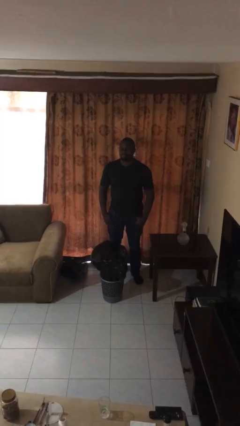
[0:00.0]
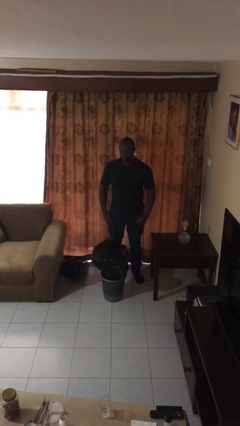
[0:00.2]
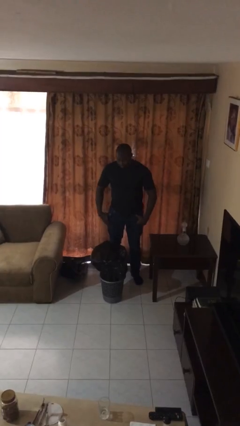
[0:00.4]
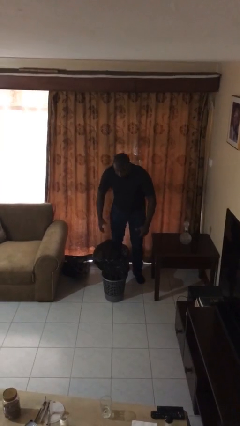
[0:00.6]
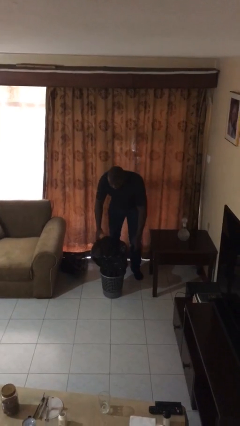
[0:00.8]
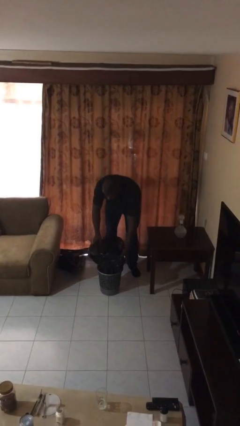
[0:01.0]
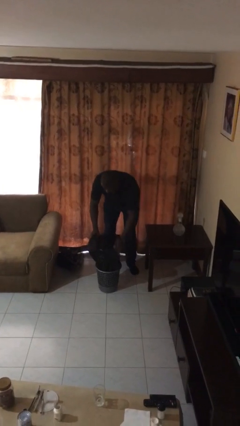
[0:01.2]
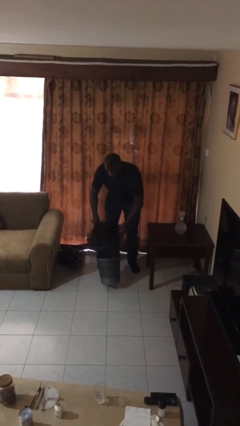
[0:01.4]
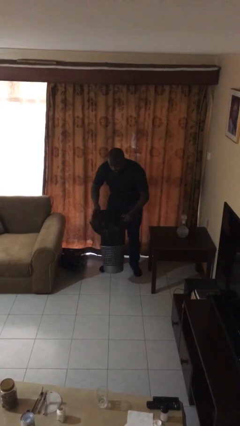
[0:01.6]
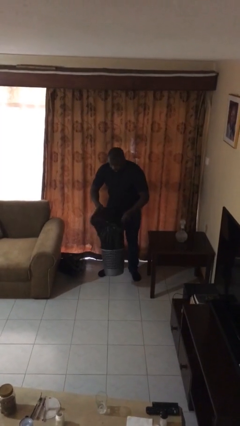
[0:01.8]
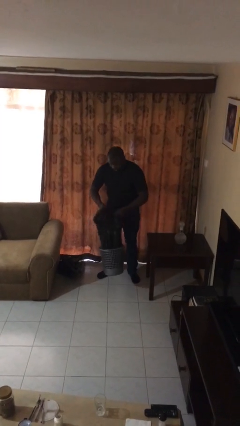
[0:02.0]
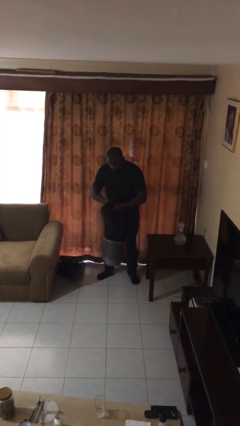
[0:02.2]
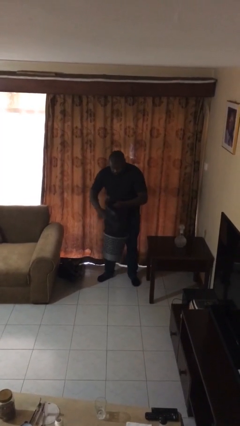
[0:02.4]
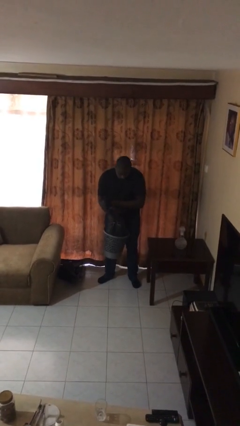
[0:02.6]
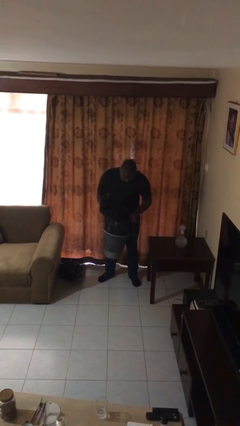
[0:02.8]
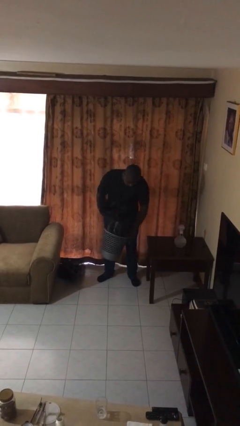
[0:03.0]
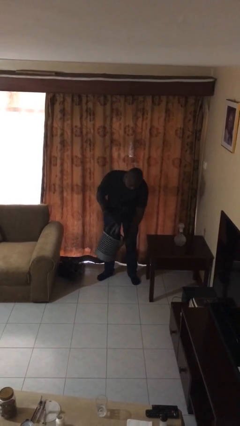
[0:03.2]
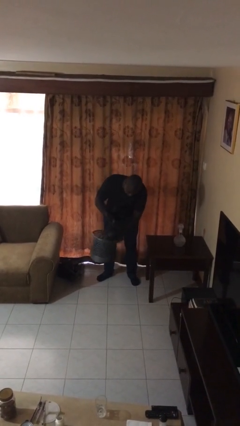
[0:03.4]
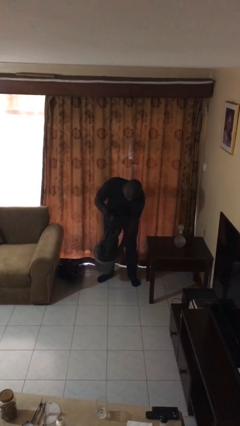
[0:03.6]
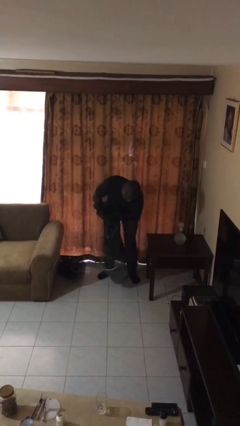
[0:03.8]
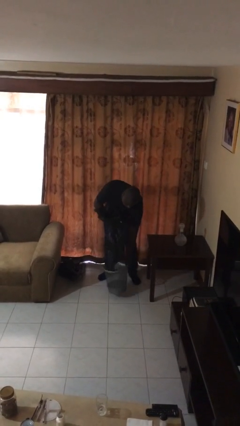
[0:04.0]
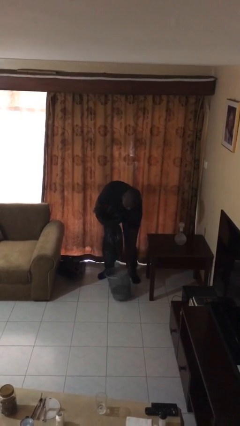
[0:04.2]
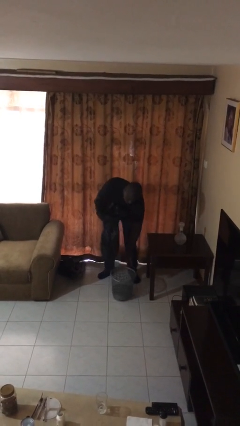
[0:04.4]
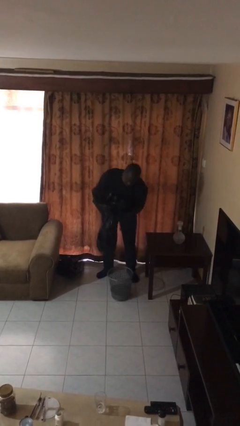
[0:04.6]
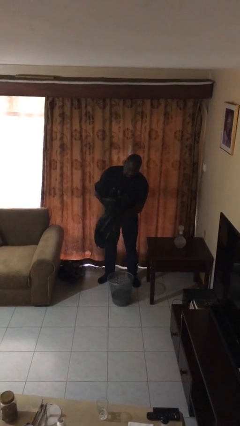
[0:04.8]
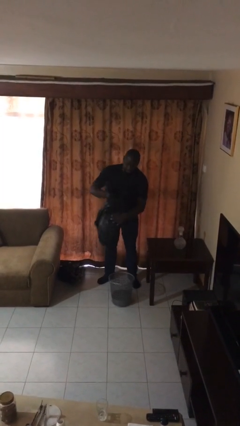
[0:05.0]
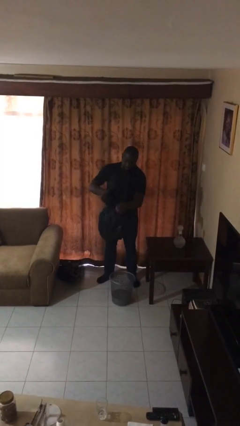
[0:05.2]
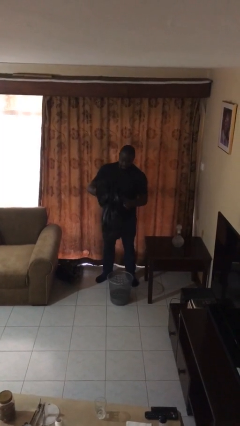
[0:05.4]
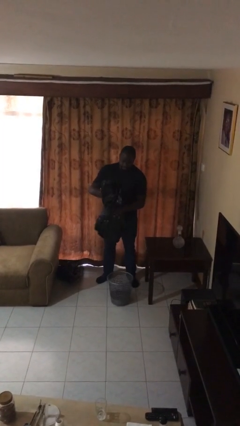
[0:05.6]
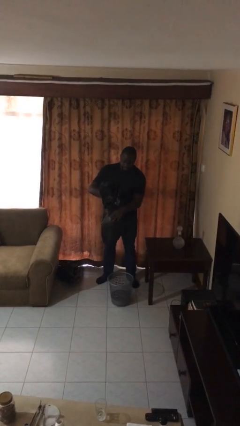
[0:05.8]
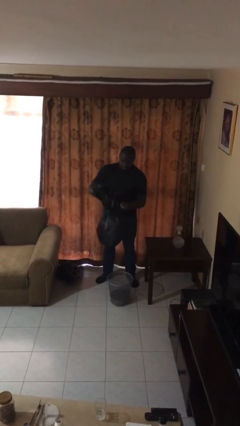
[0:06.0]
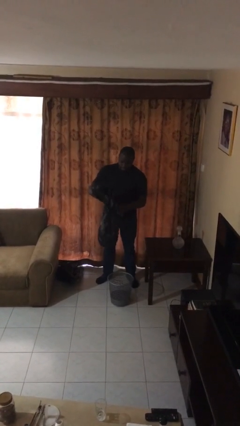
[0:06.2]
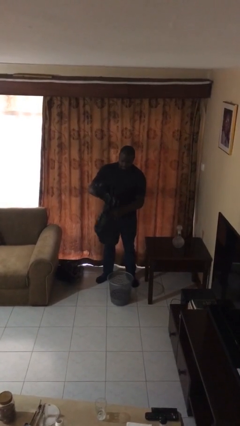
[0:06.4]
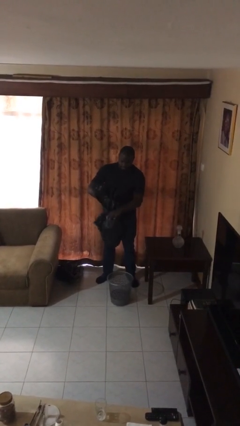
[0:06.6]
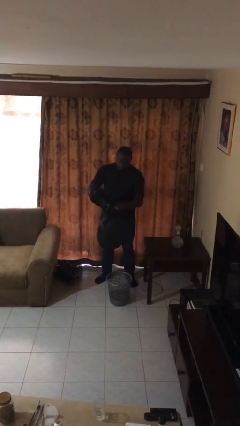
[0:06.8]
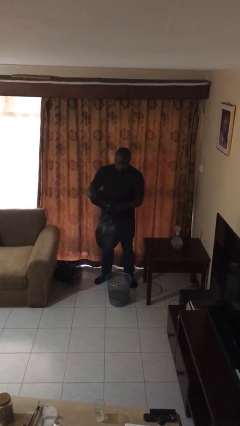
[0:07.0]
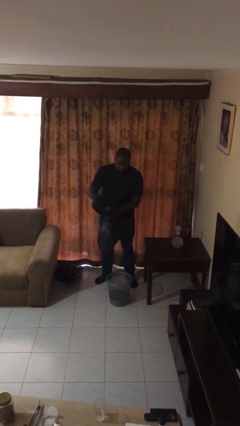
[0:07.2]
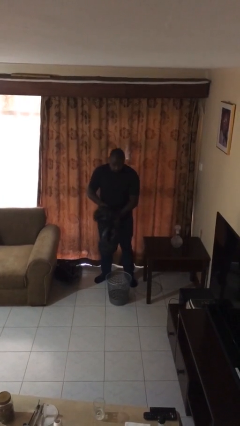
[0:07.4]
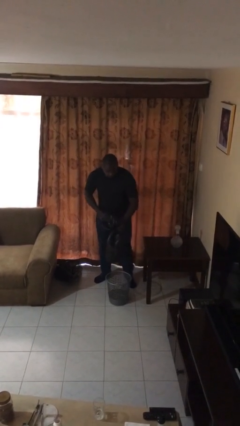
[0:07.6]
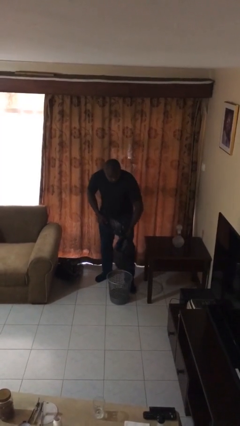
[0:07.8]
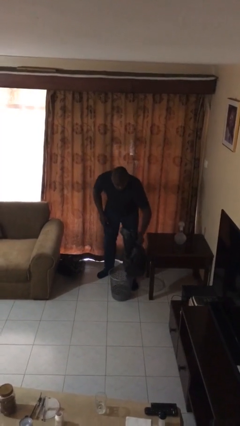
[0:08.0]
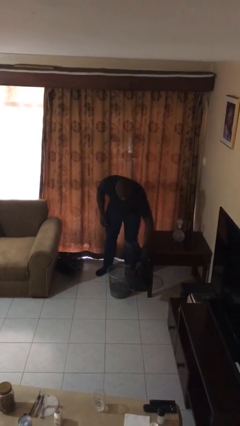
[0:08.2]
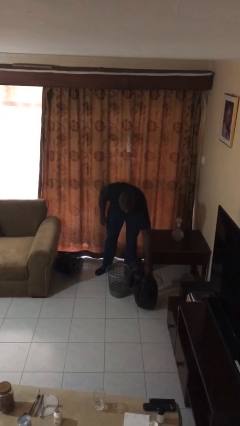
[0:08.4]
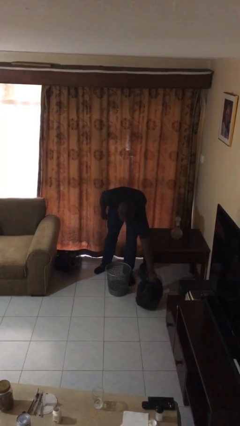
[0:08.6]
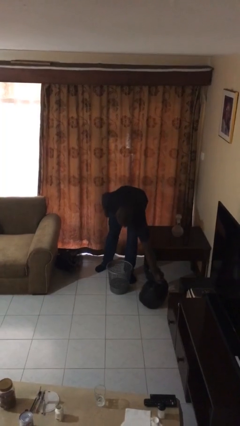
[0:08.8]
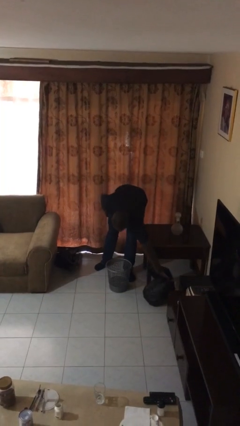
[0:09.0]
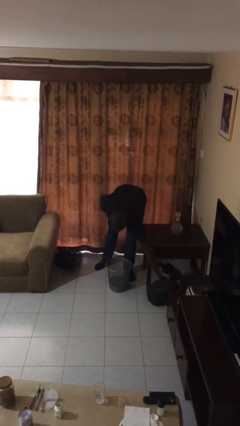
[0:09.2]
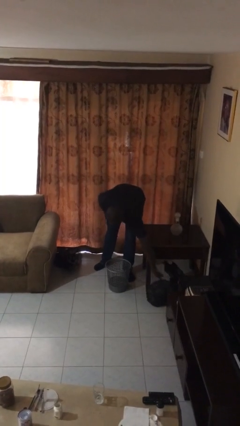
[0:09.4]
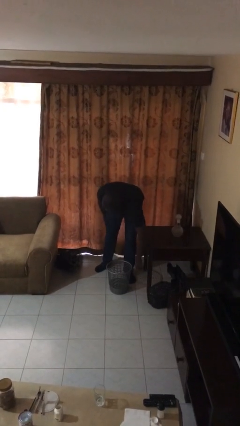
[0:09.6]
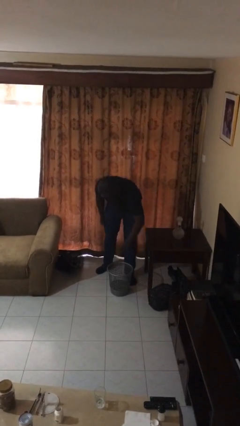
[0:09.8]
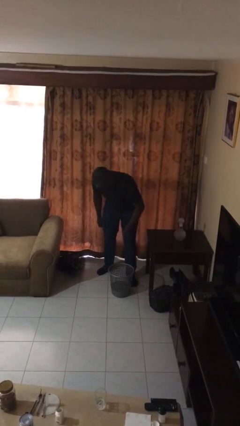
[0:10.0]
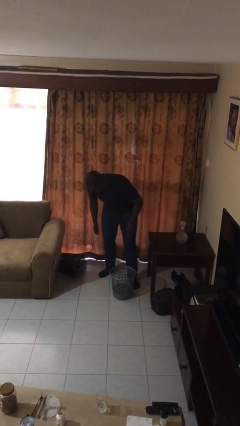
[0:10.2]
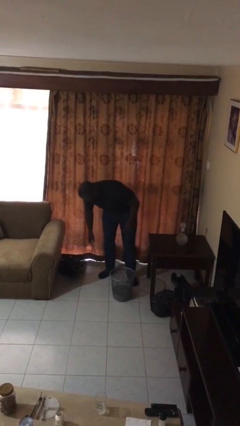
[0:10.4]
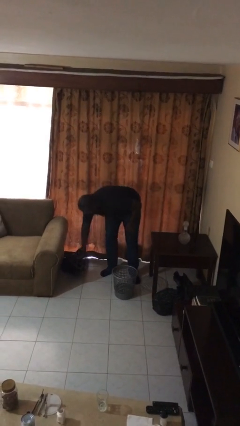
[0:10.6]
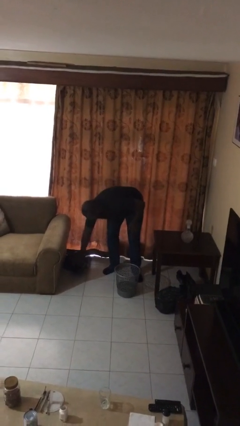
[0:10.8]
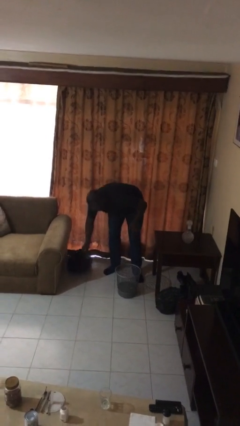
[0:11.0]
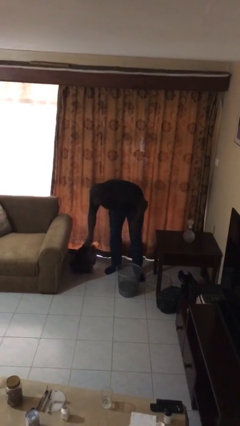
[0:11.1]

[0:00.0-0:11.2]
person removes trashbag from trashcan

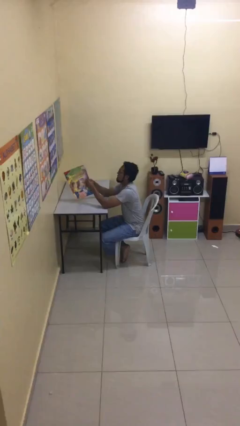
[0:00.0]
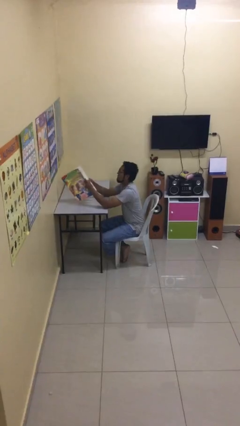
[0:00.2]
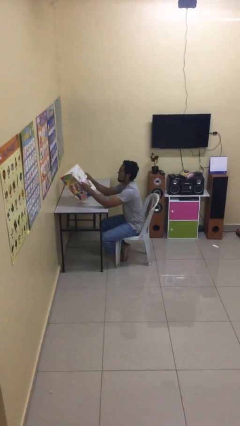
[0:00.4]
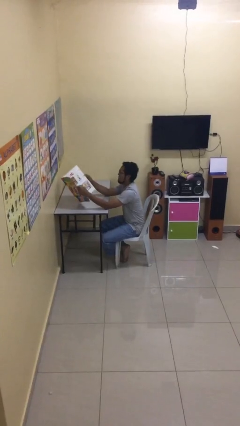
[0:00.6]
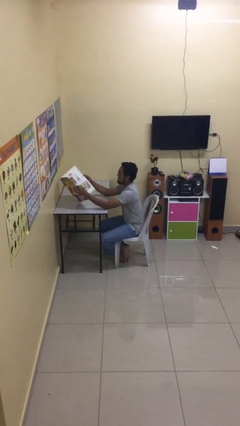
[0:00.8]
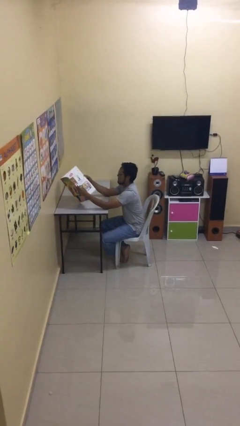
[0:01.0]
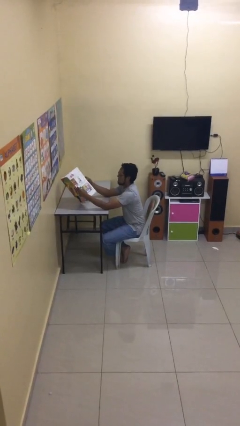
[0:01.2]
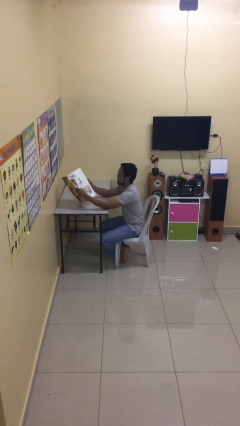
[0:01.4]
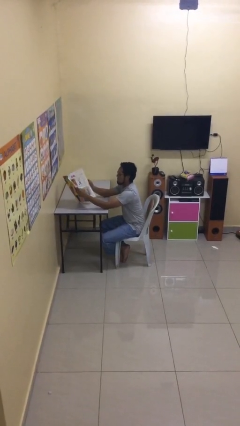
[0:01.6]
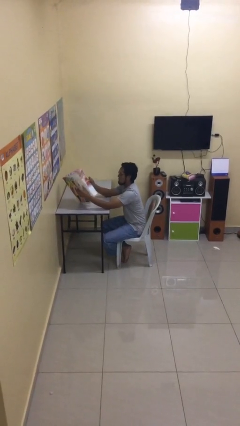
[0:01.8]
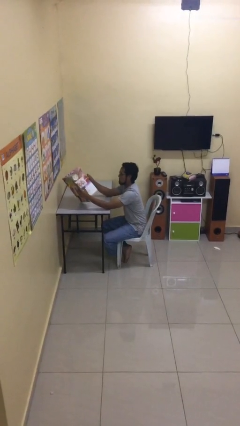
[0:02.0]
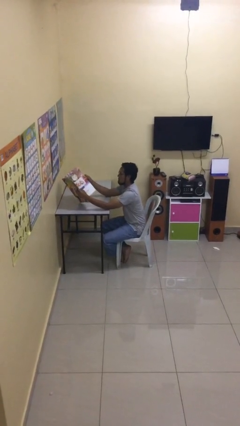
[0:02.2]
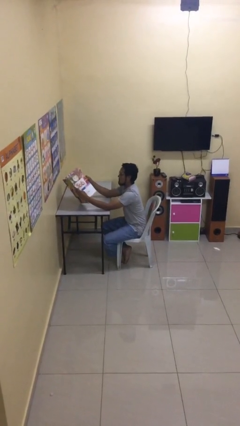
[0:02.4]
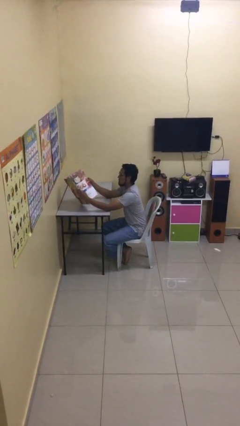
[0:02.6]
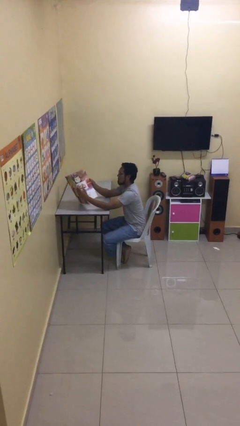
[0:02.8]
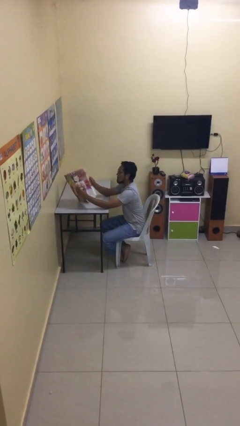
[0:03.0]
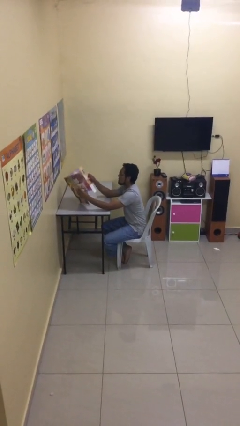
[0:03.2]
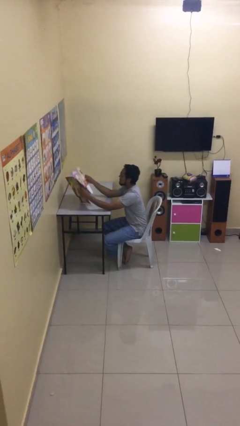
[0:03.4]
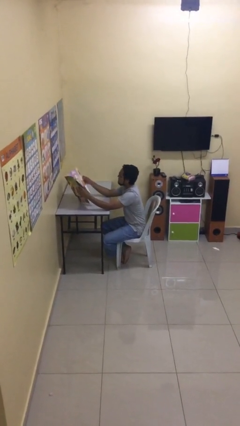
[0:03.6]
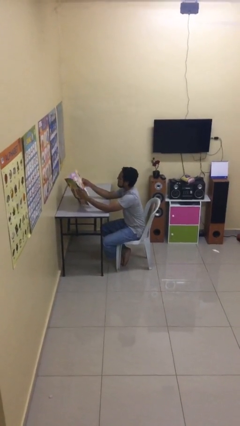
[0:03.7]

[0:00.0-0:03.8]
person reads document

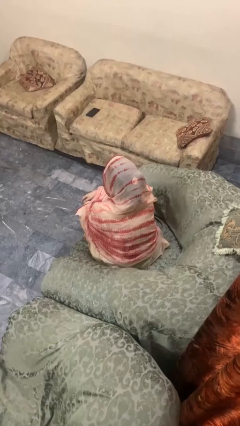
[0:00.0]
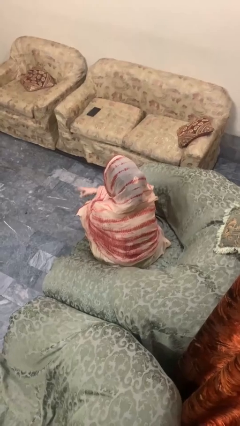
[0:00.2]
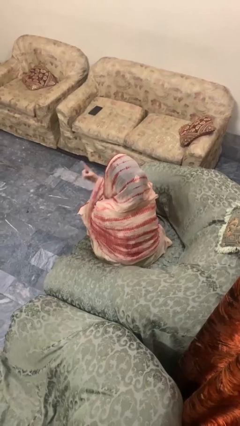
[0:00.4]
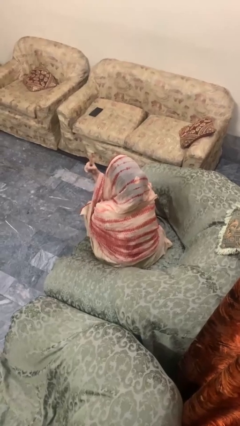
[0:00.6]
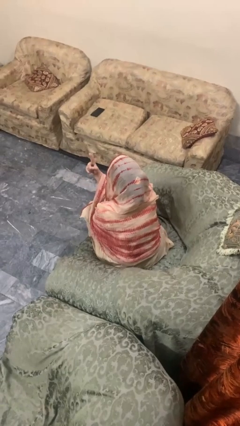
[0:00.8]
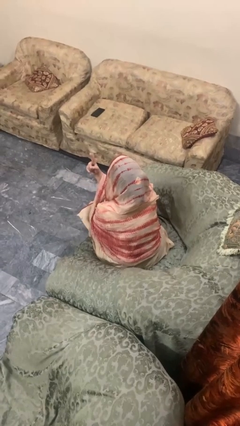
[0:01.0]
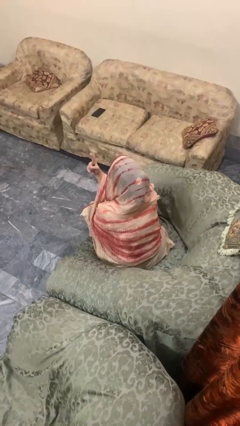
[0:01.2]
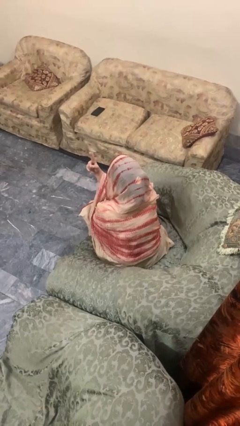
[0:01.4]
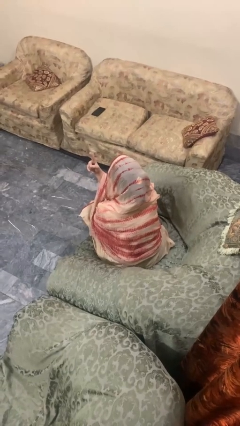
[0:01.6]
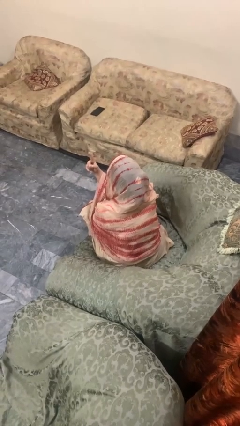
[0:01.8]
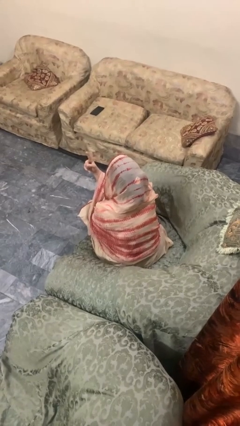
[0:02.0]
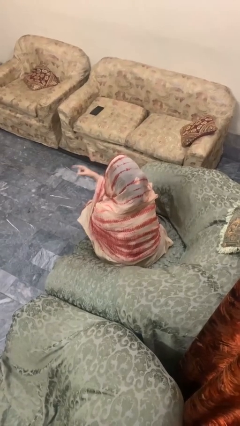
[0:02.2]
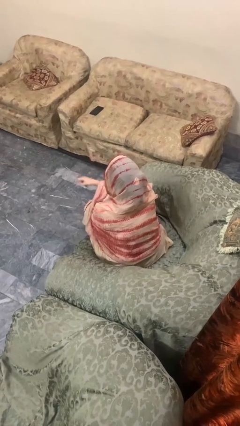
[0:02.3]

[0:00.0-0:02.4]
person gestures number one
